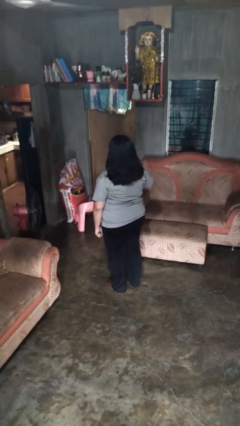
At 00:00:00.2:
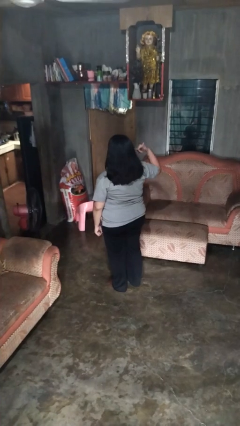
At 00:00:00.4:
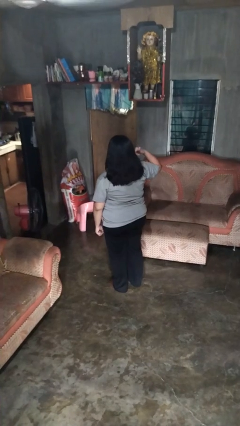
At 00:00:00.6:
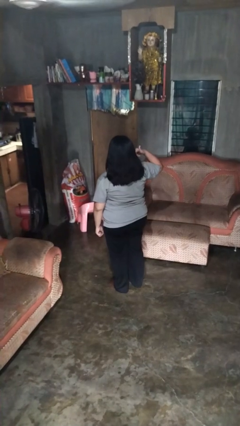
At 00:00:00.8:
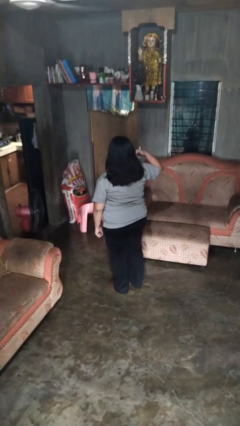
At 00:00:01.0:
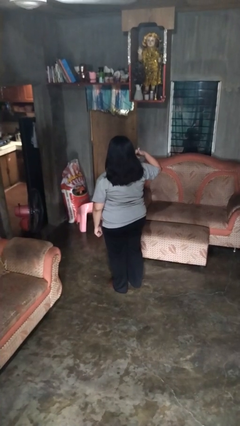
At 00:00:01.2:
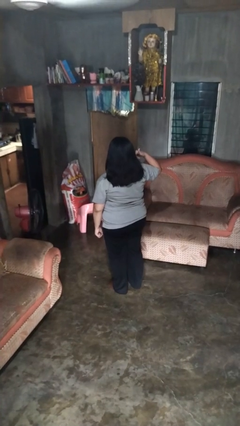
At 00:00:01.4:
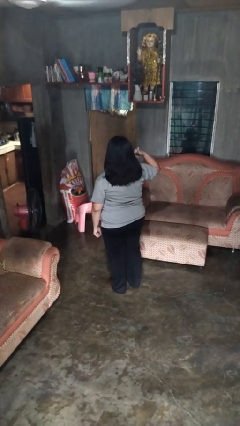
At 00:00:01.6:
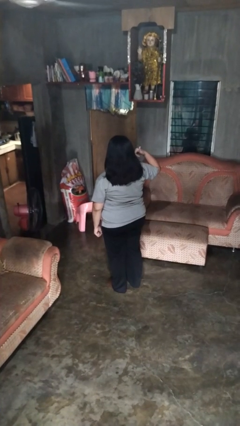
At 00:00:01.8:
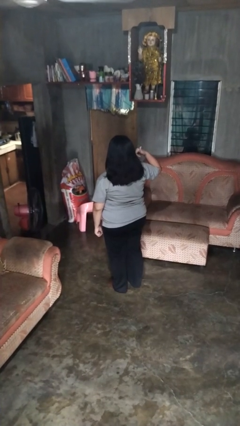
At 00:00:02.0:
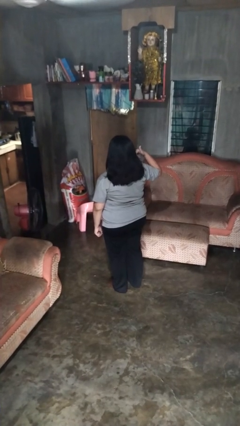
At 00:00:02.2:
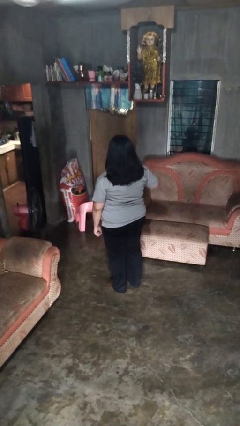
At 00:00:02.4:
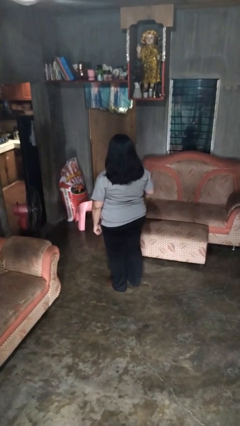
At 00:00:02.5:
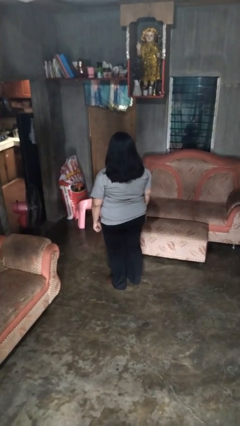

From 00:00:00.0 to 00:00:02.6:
person gestures call me

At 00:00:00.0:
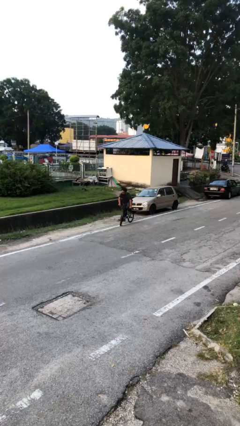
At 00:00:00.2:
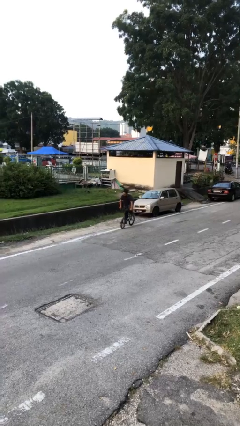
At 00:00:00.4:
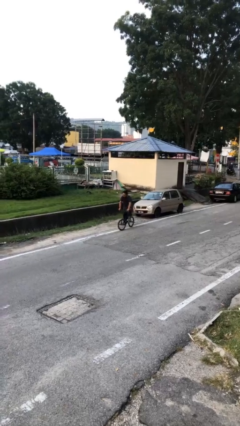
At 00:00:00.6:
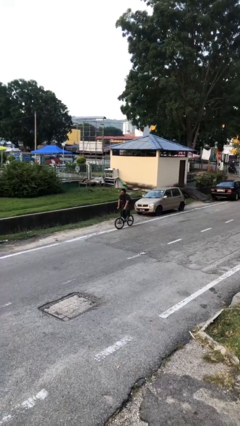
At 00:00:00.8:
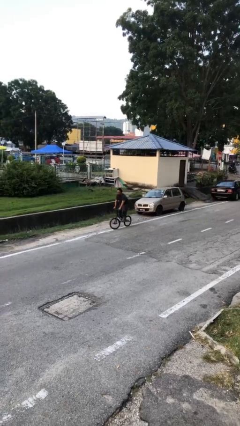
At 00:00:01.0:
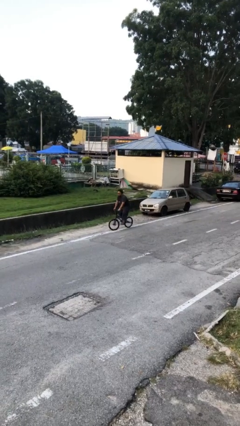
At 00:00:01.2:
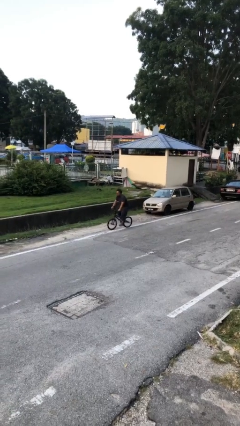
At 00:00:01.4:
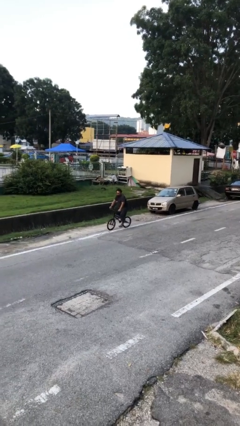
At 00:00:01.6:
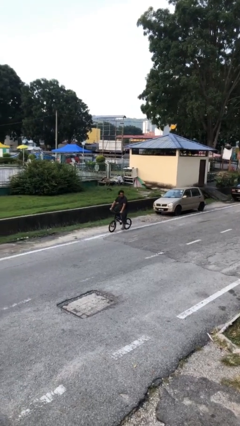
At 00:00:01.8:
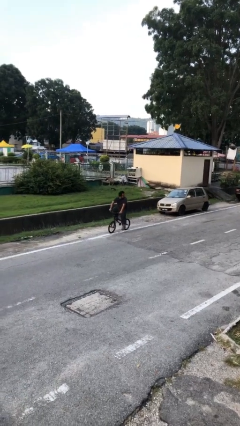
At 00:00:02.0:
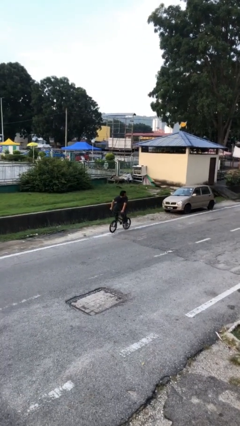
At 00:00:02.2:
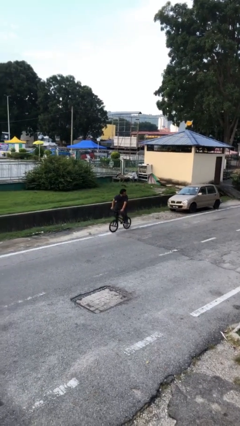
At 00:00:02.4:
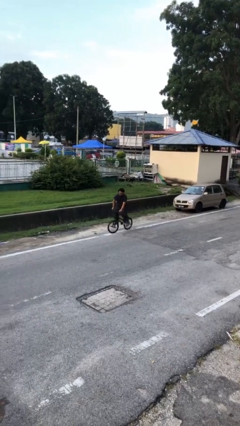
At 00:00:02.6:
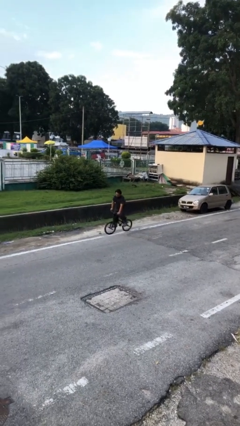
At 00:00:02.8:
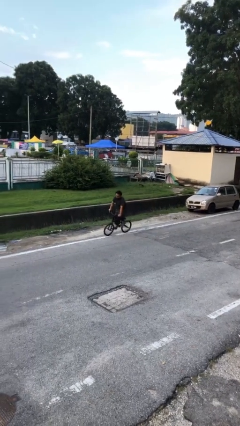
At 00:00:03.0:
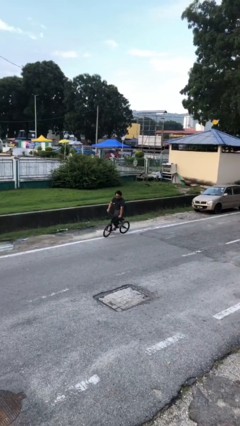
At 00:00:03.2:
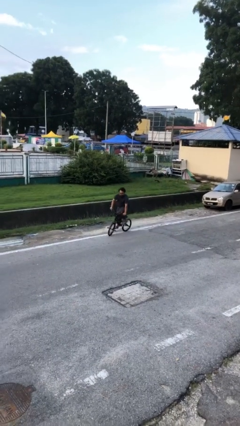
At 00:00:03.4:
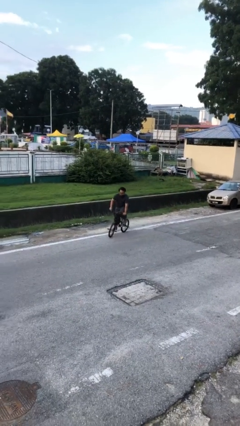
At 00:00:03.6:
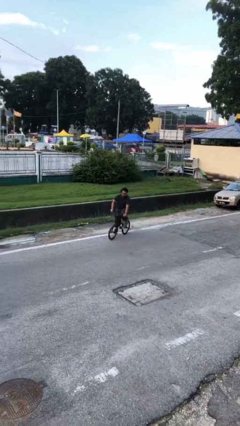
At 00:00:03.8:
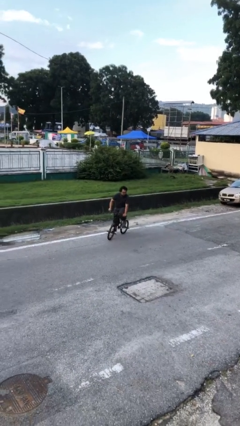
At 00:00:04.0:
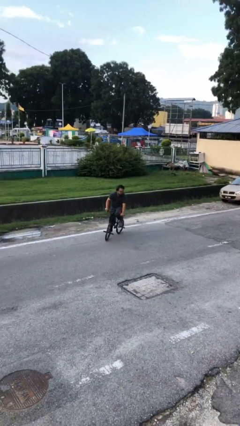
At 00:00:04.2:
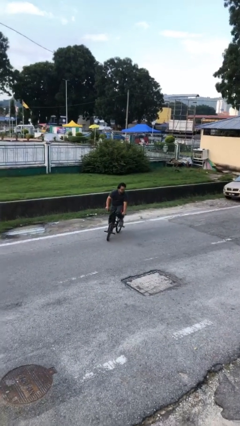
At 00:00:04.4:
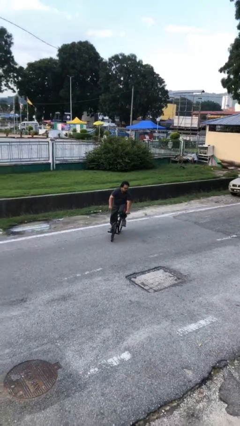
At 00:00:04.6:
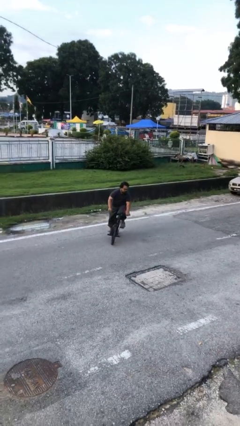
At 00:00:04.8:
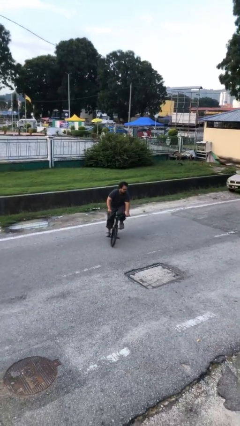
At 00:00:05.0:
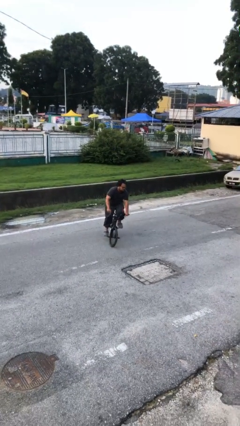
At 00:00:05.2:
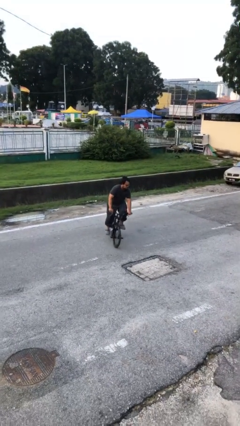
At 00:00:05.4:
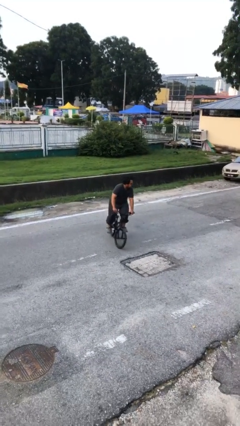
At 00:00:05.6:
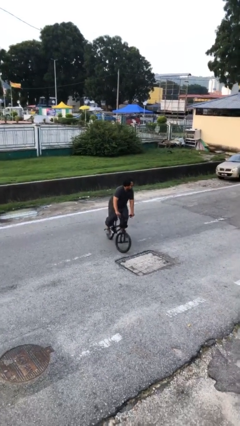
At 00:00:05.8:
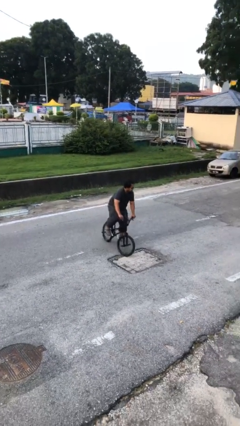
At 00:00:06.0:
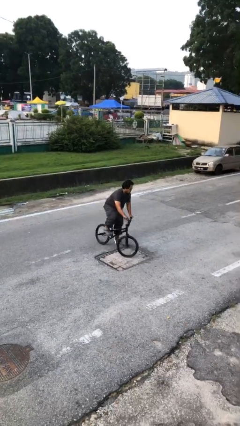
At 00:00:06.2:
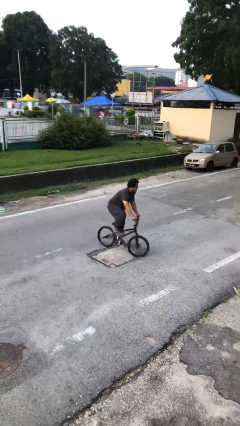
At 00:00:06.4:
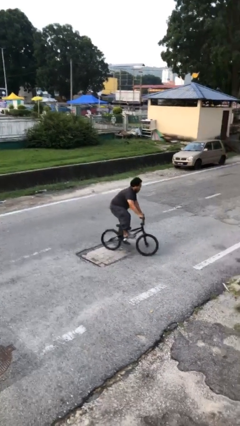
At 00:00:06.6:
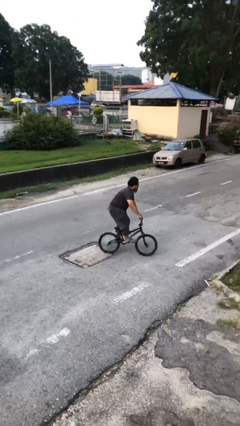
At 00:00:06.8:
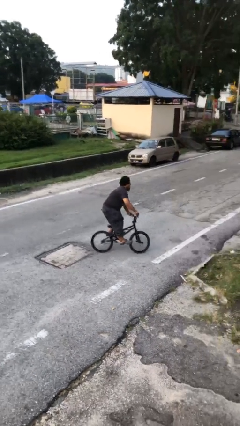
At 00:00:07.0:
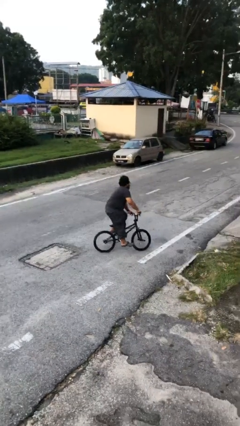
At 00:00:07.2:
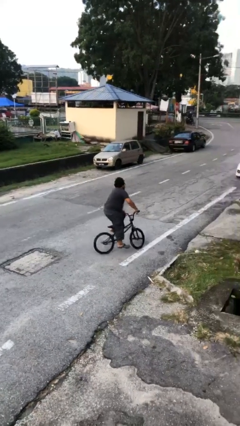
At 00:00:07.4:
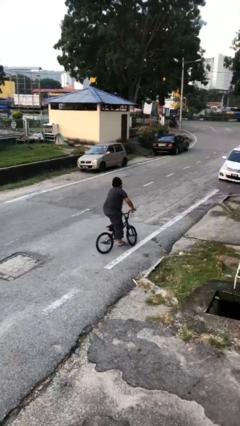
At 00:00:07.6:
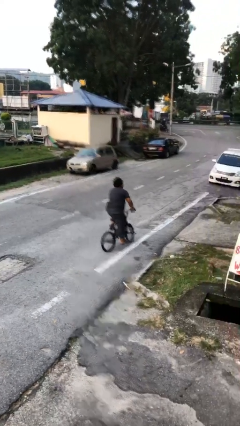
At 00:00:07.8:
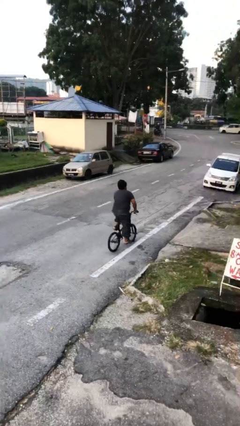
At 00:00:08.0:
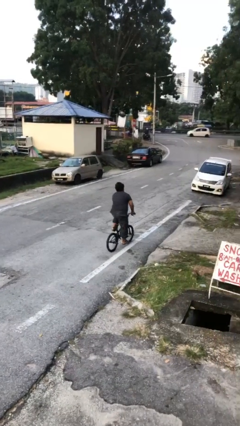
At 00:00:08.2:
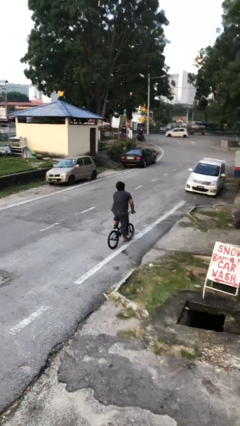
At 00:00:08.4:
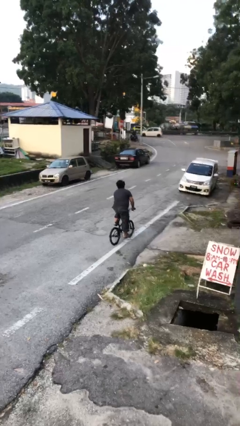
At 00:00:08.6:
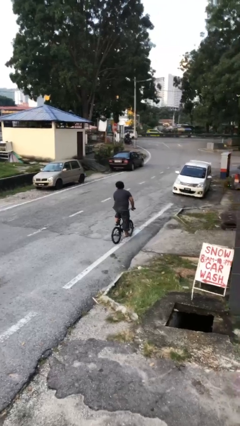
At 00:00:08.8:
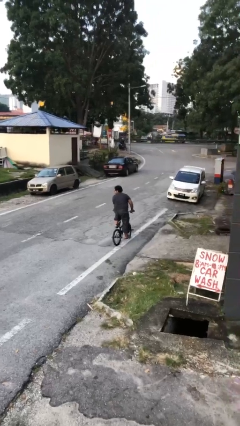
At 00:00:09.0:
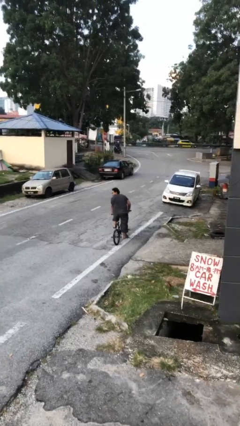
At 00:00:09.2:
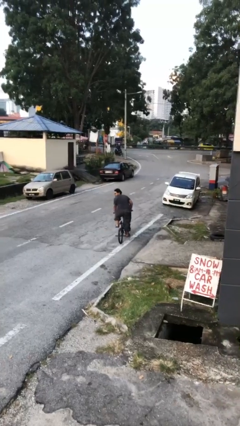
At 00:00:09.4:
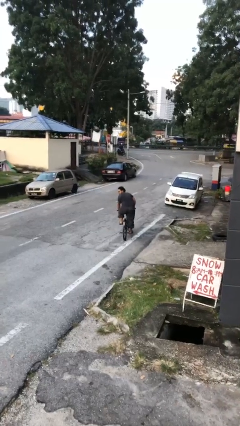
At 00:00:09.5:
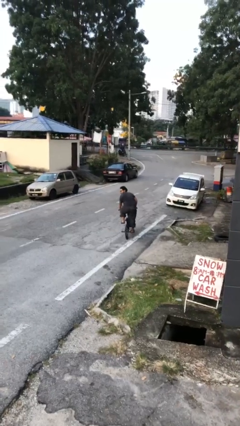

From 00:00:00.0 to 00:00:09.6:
person rides bicycle

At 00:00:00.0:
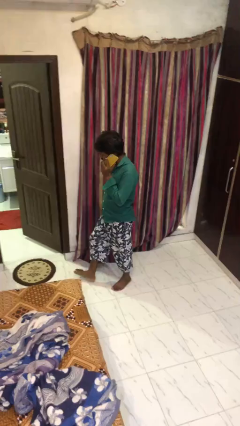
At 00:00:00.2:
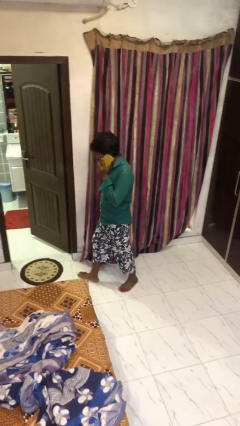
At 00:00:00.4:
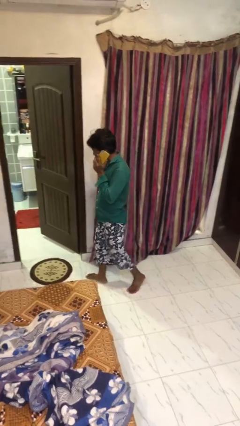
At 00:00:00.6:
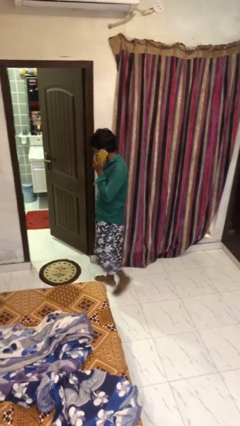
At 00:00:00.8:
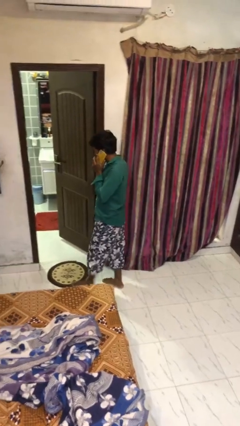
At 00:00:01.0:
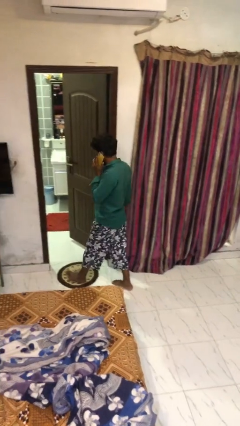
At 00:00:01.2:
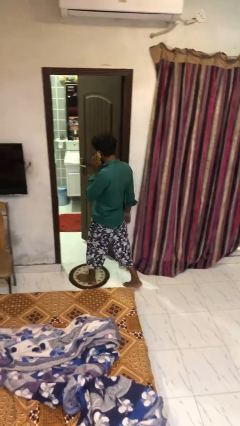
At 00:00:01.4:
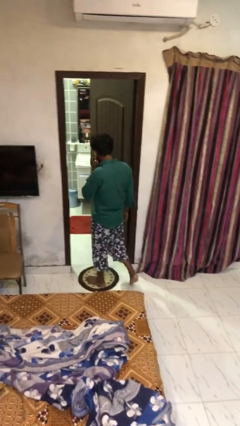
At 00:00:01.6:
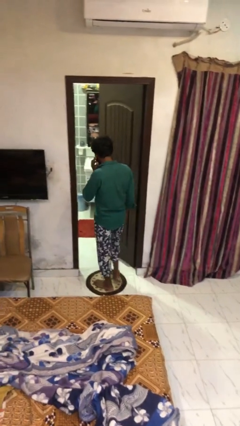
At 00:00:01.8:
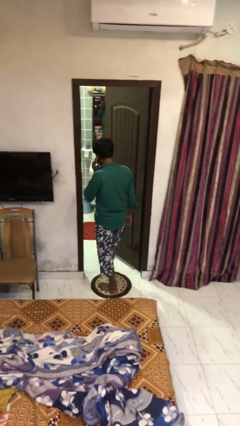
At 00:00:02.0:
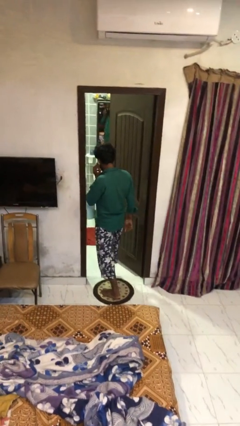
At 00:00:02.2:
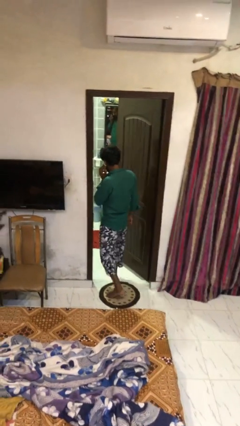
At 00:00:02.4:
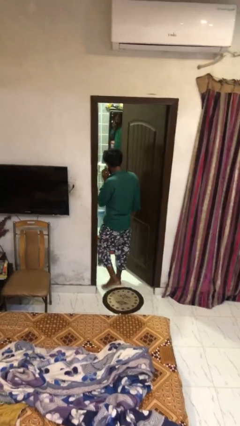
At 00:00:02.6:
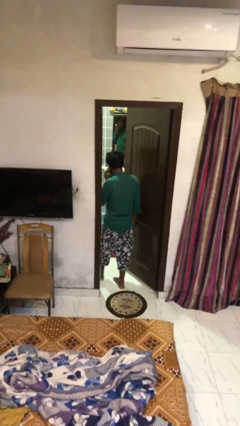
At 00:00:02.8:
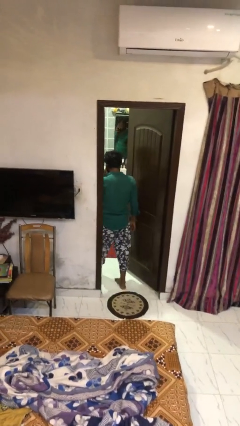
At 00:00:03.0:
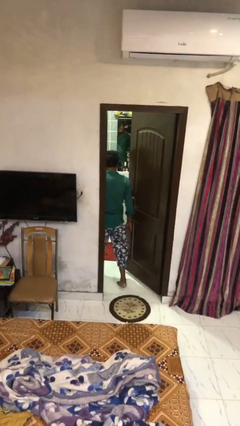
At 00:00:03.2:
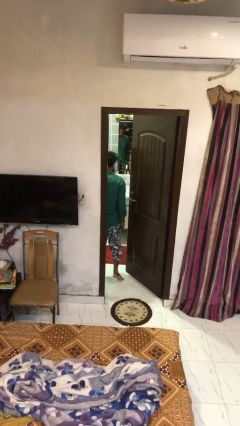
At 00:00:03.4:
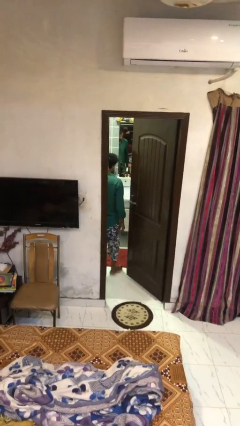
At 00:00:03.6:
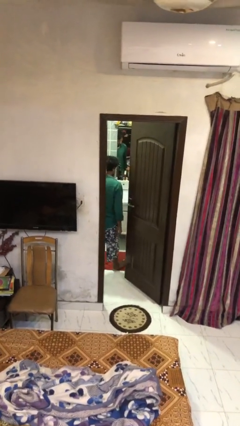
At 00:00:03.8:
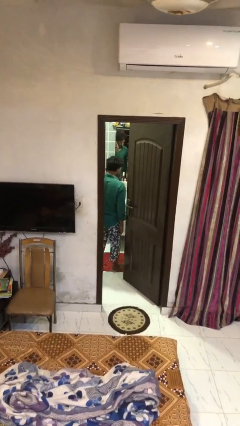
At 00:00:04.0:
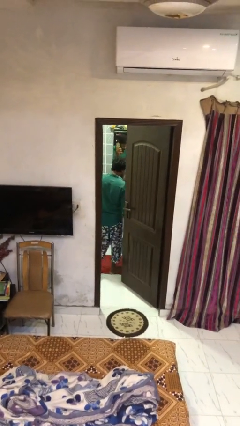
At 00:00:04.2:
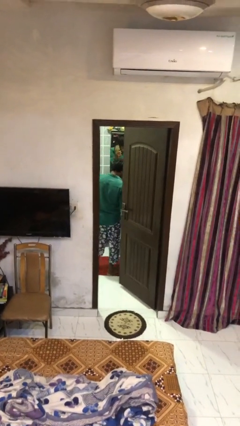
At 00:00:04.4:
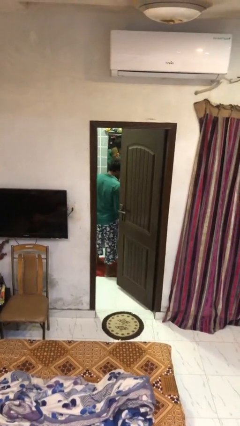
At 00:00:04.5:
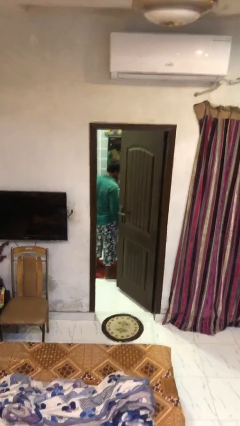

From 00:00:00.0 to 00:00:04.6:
person exits scene through structure

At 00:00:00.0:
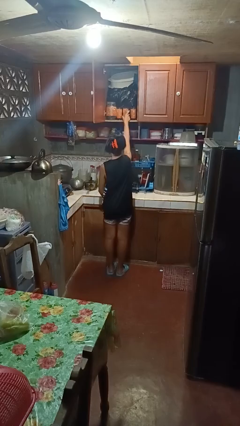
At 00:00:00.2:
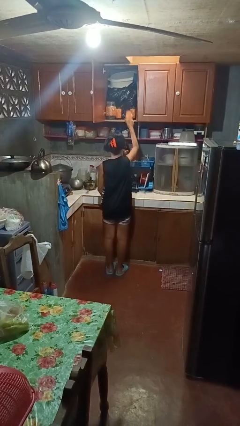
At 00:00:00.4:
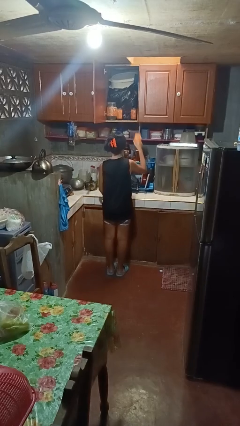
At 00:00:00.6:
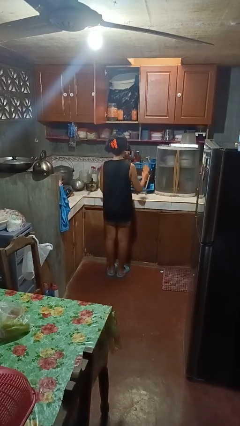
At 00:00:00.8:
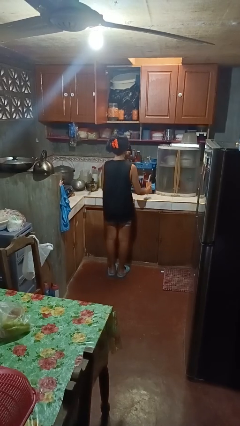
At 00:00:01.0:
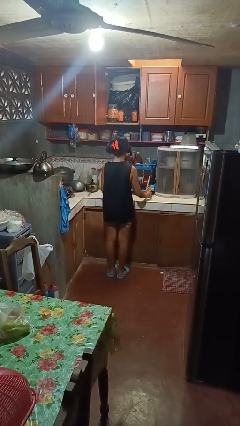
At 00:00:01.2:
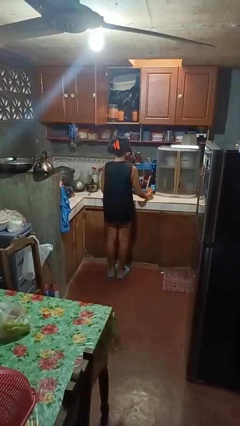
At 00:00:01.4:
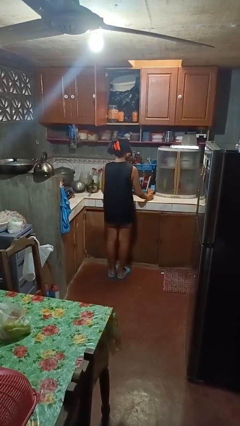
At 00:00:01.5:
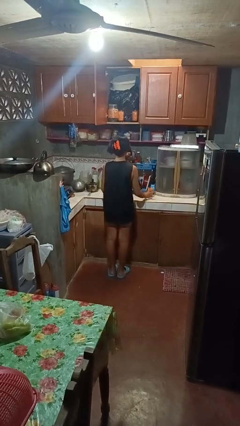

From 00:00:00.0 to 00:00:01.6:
person takes object from cabinet
